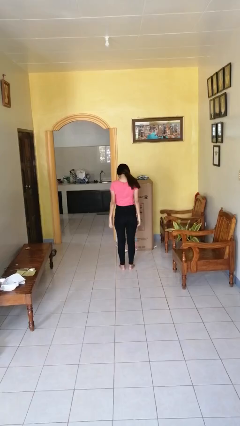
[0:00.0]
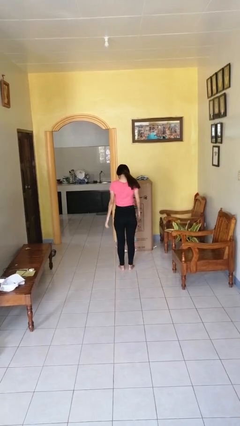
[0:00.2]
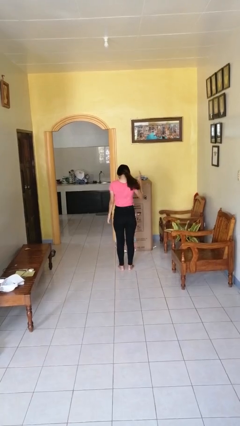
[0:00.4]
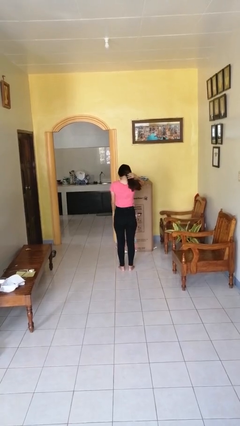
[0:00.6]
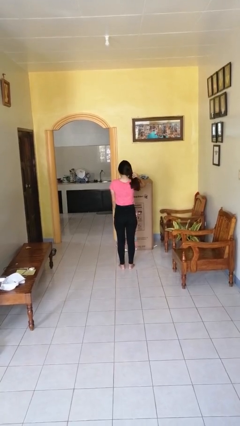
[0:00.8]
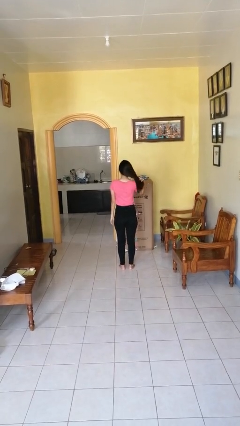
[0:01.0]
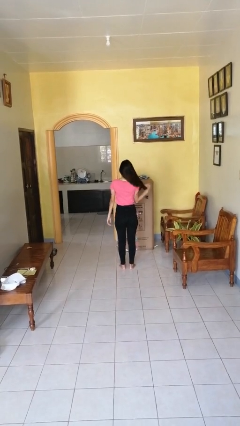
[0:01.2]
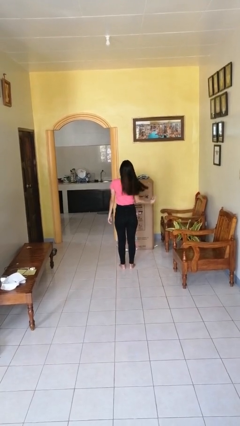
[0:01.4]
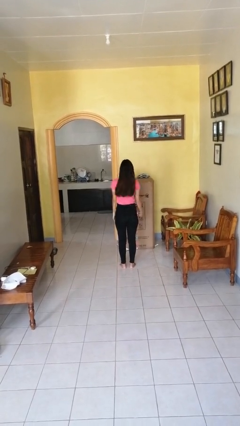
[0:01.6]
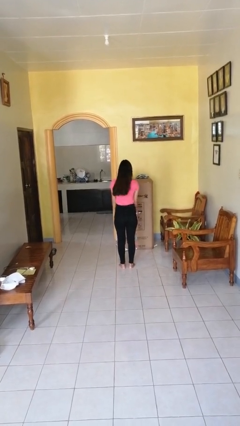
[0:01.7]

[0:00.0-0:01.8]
person takes off hairtie

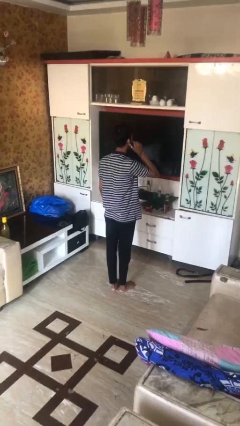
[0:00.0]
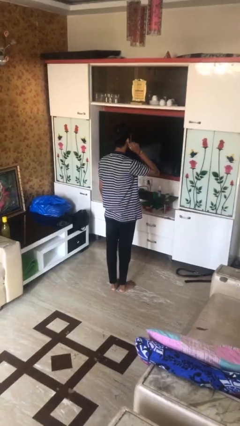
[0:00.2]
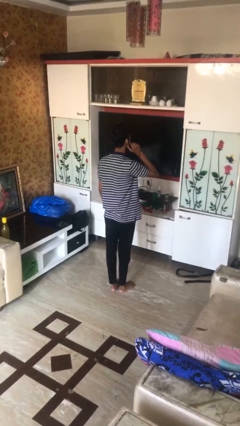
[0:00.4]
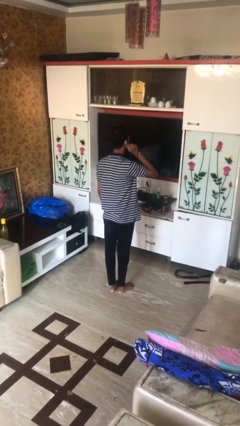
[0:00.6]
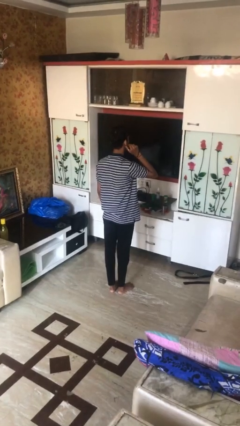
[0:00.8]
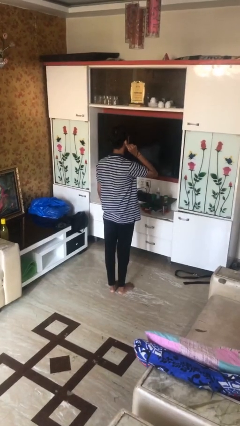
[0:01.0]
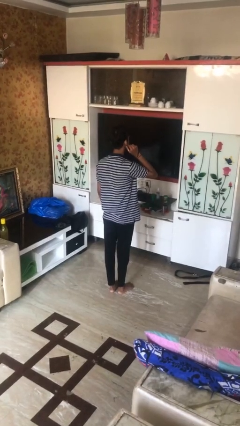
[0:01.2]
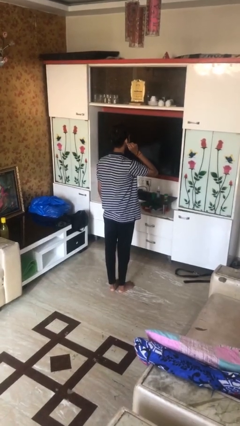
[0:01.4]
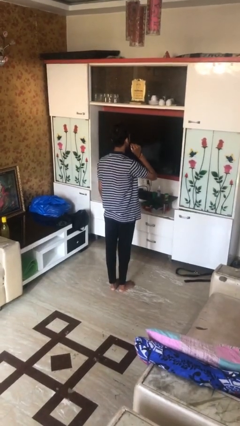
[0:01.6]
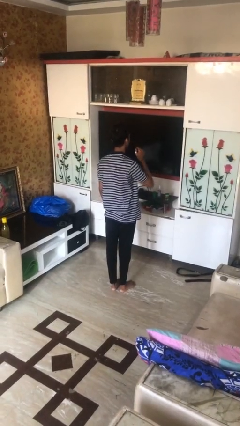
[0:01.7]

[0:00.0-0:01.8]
person touches earlobe

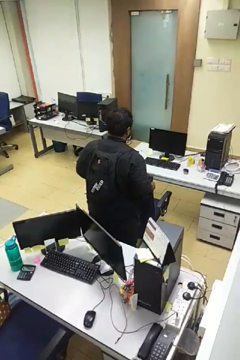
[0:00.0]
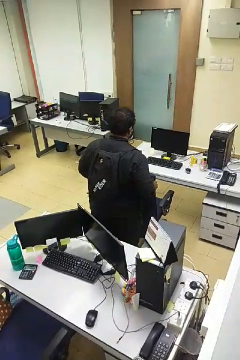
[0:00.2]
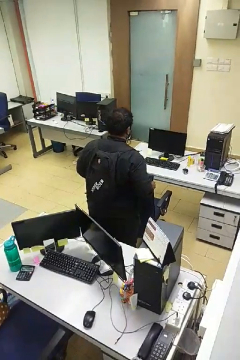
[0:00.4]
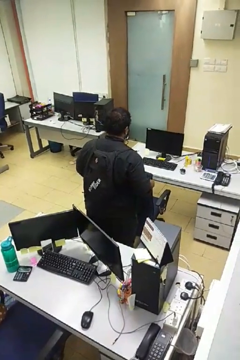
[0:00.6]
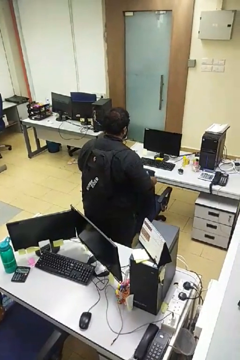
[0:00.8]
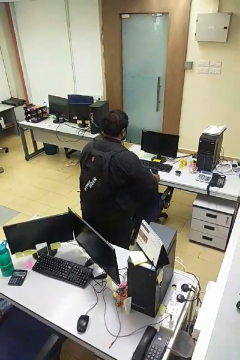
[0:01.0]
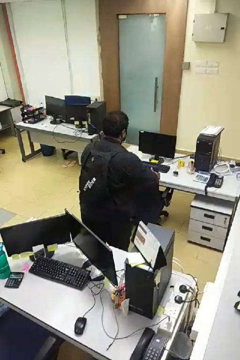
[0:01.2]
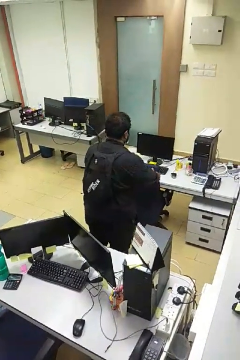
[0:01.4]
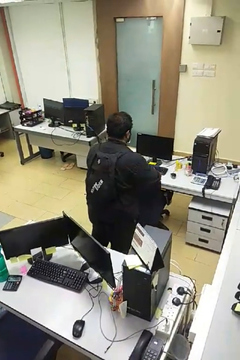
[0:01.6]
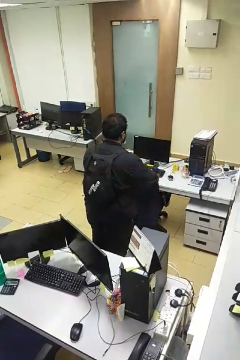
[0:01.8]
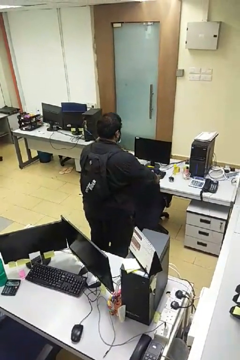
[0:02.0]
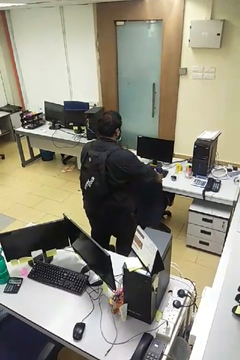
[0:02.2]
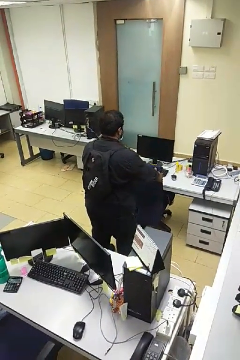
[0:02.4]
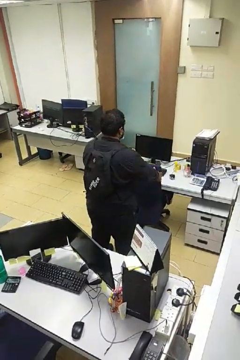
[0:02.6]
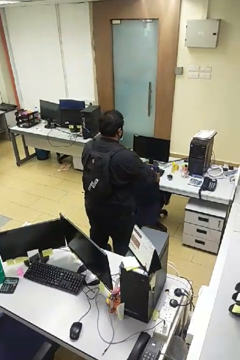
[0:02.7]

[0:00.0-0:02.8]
person pushes in chair

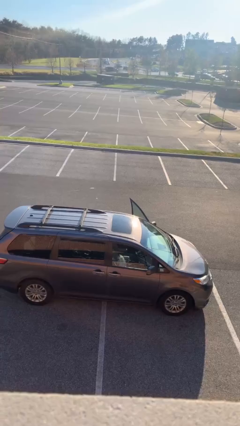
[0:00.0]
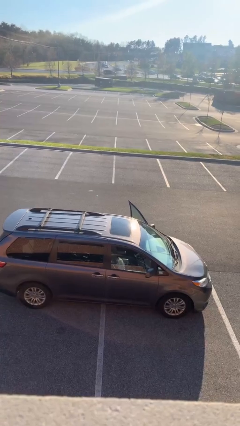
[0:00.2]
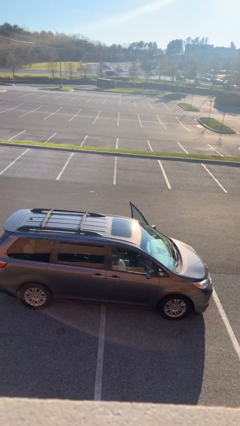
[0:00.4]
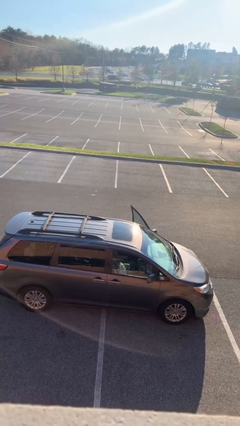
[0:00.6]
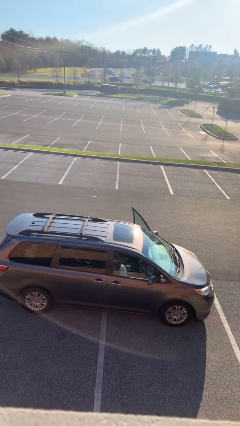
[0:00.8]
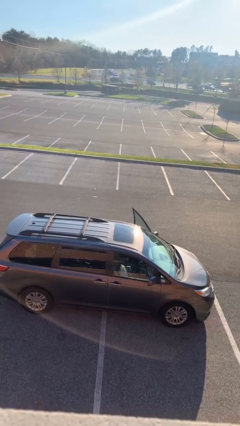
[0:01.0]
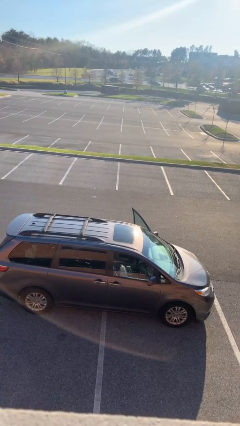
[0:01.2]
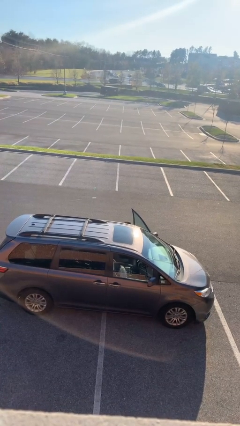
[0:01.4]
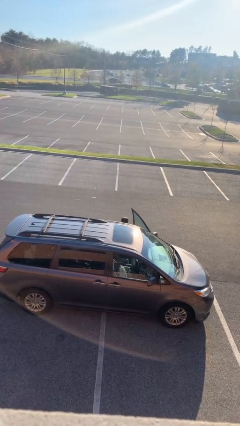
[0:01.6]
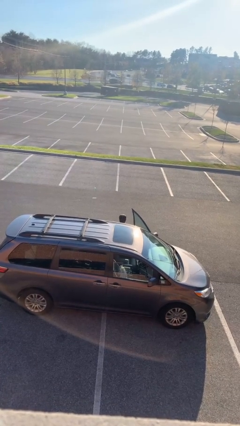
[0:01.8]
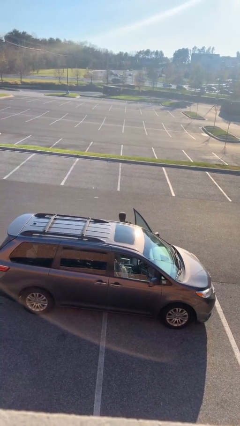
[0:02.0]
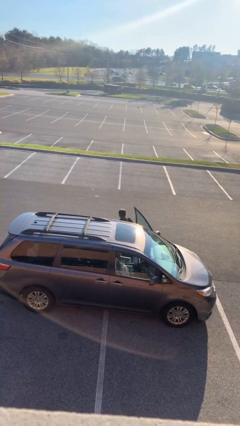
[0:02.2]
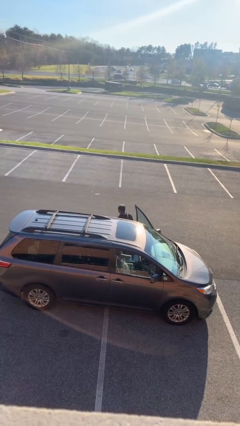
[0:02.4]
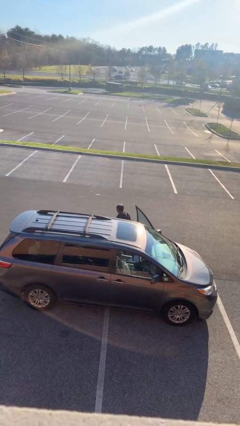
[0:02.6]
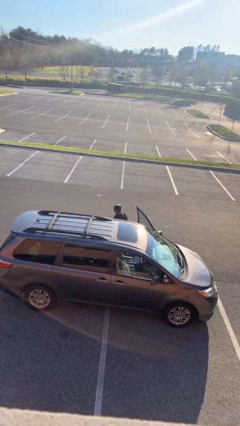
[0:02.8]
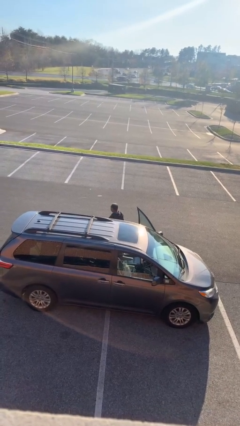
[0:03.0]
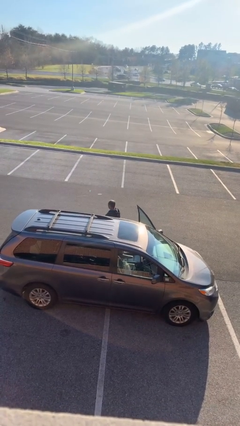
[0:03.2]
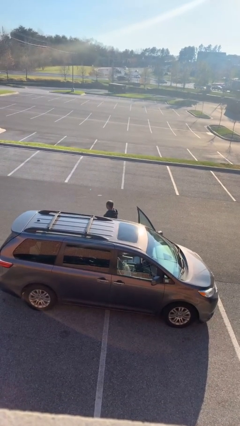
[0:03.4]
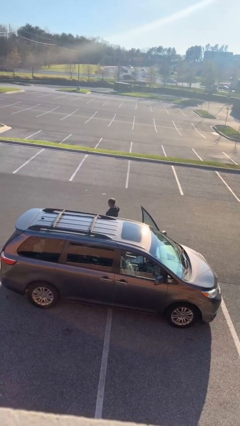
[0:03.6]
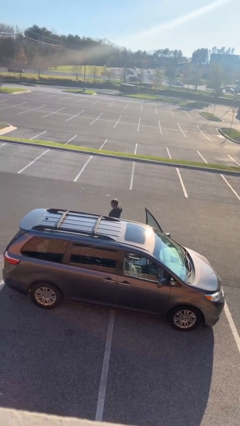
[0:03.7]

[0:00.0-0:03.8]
person exits car

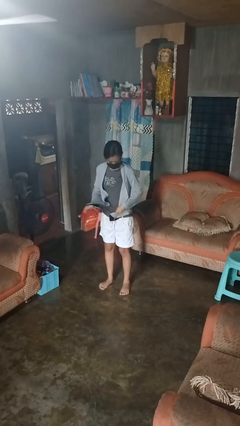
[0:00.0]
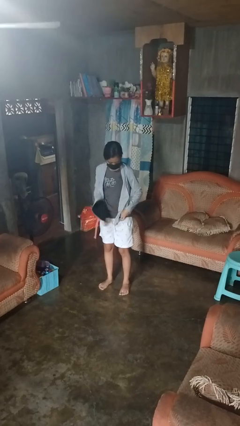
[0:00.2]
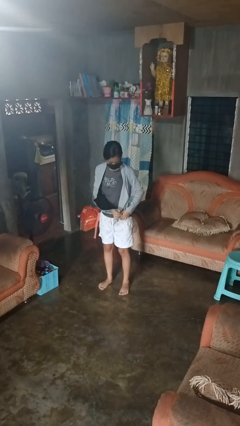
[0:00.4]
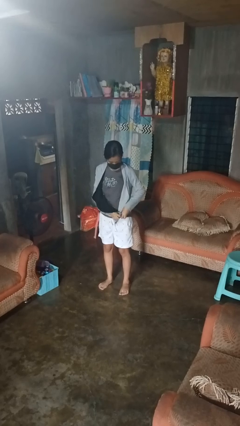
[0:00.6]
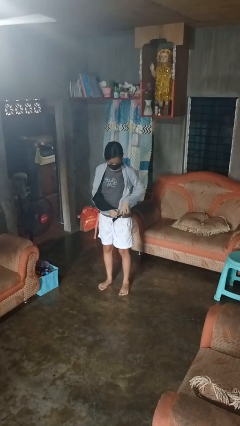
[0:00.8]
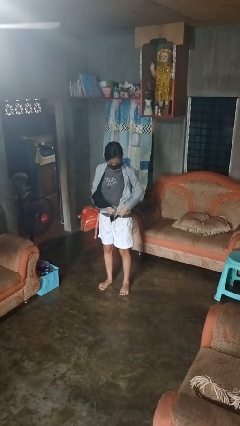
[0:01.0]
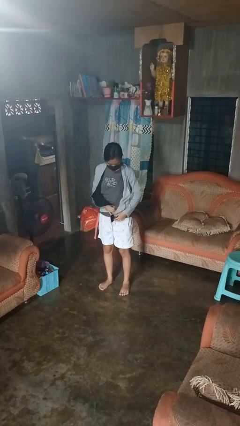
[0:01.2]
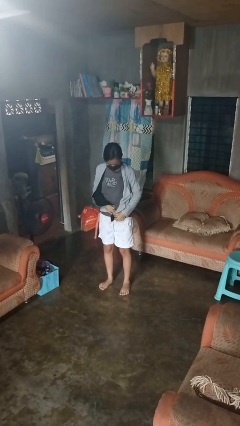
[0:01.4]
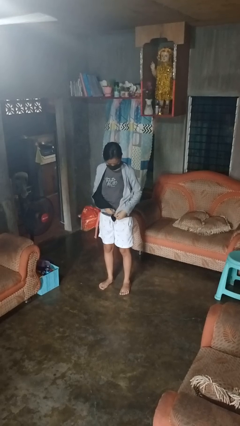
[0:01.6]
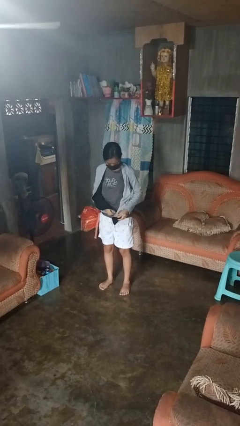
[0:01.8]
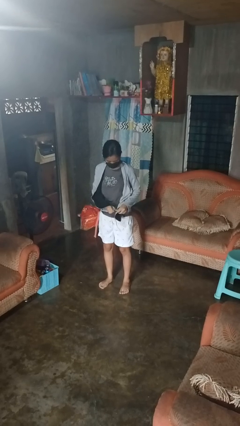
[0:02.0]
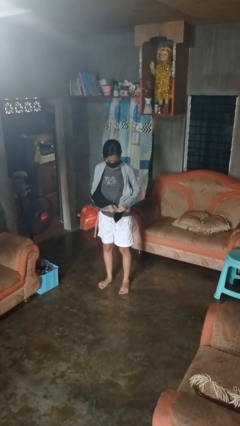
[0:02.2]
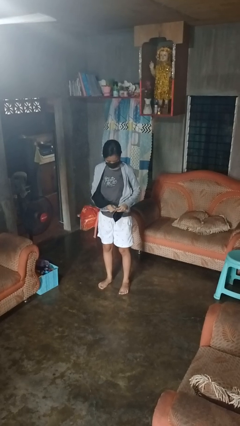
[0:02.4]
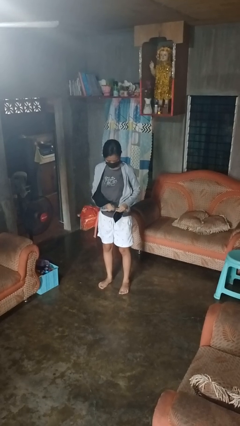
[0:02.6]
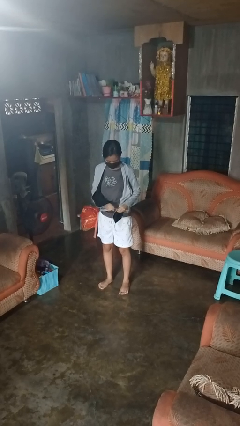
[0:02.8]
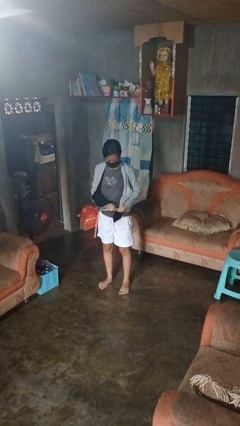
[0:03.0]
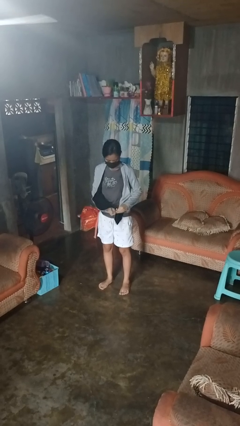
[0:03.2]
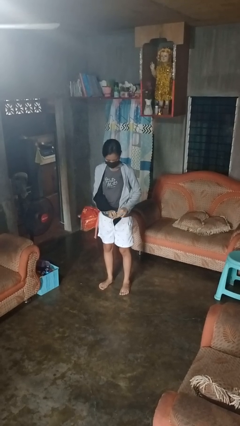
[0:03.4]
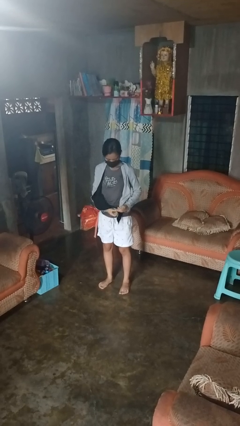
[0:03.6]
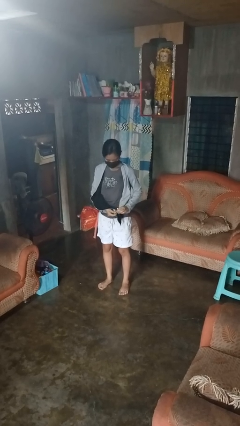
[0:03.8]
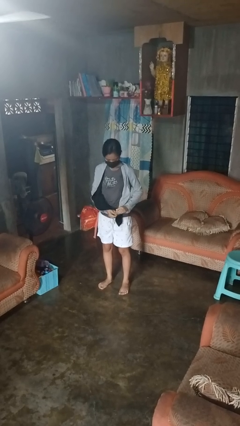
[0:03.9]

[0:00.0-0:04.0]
person zips up jacket

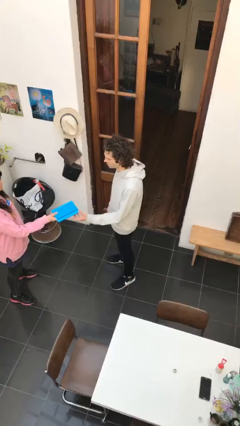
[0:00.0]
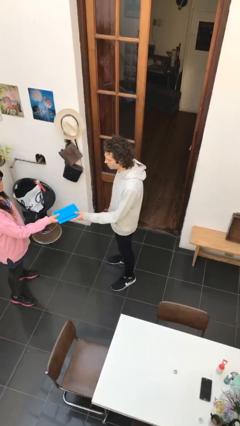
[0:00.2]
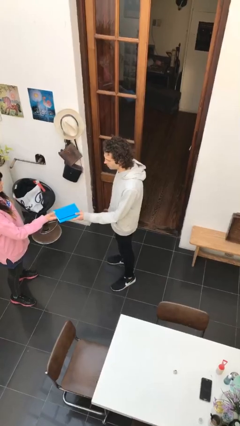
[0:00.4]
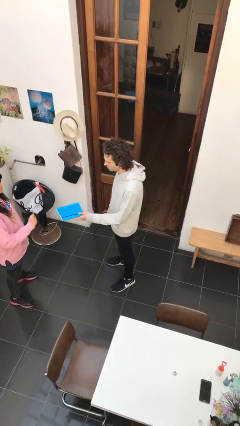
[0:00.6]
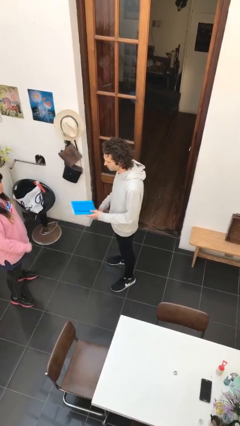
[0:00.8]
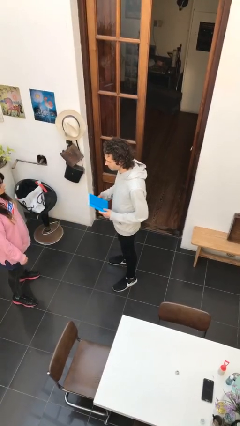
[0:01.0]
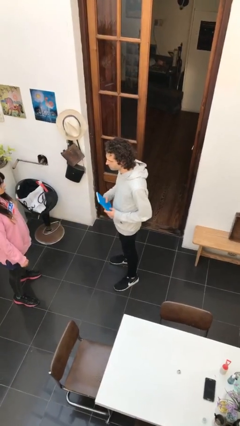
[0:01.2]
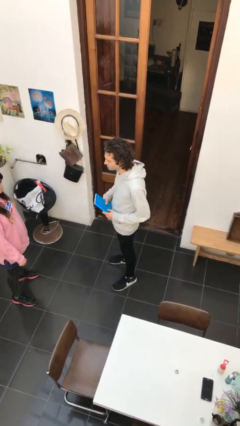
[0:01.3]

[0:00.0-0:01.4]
person transfers object to person

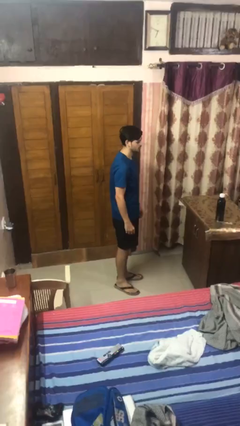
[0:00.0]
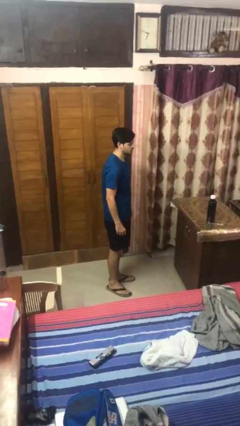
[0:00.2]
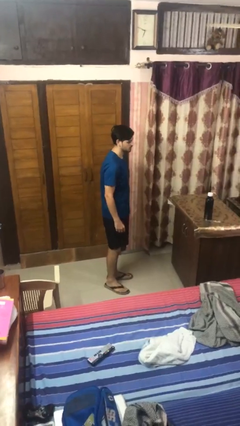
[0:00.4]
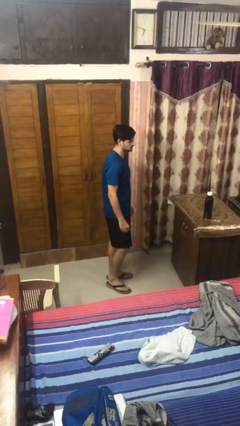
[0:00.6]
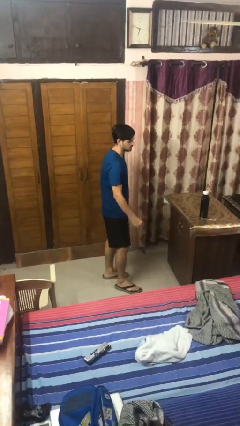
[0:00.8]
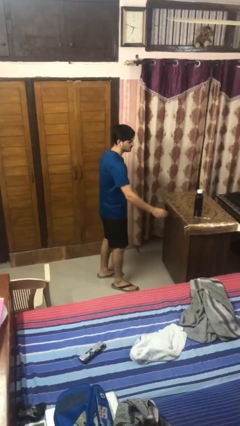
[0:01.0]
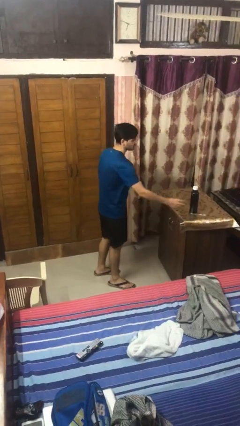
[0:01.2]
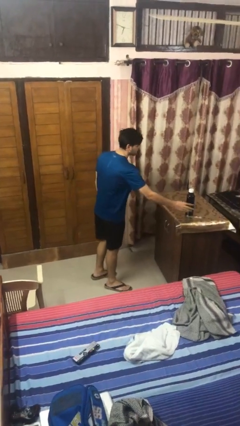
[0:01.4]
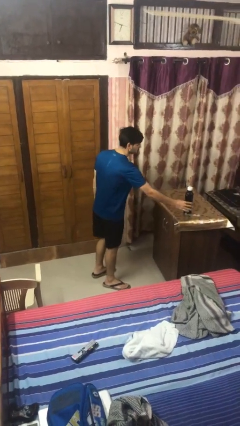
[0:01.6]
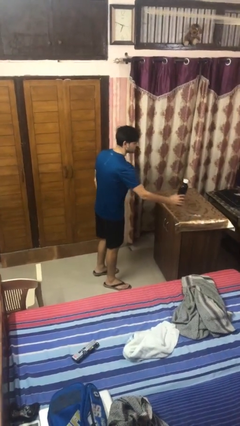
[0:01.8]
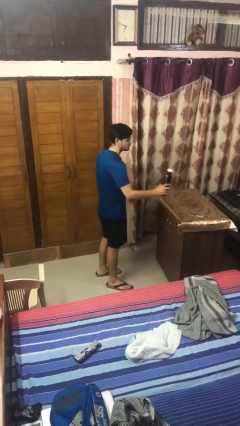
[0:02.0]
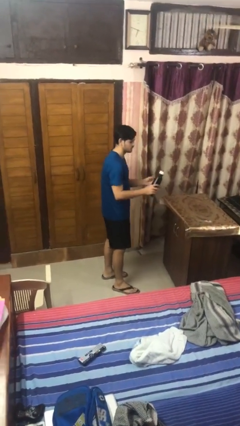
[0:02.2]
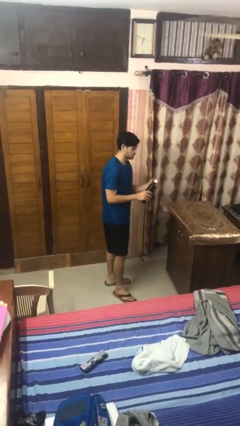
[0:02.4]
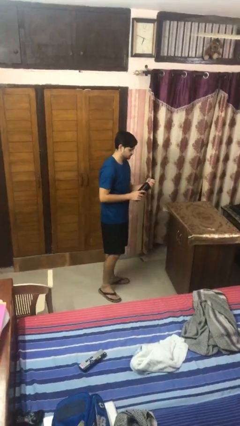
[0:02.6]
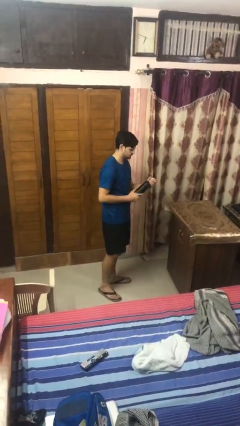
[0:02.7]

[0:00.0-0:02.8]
person picks up object from countertop
